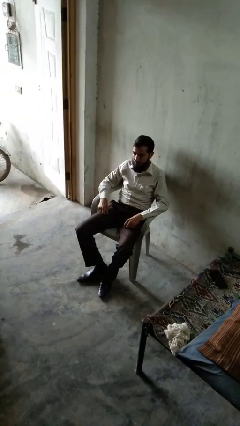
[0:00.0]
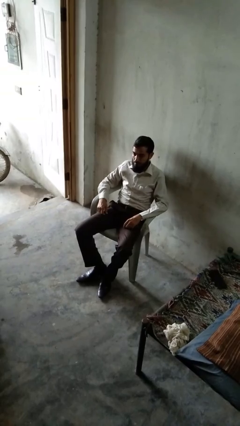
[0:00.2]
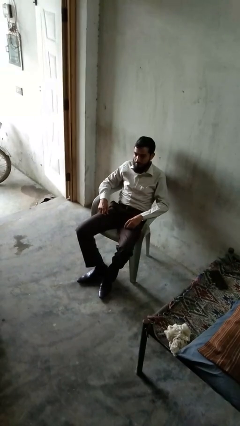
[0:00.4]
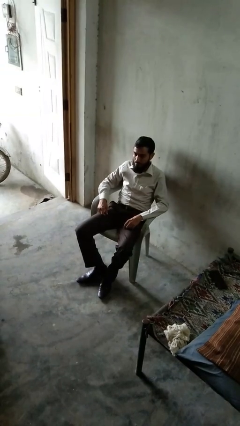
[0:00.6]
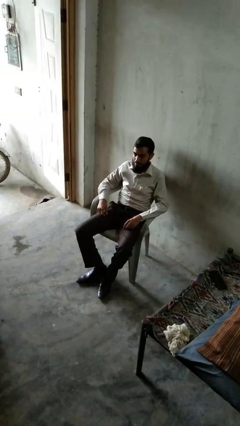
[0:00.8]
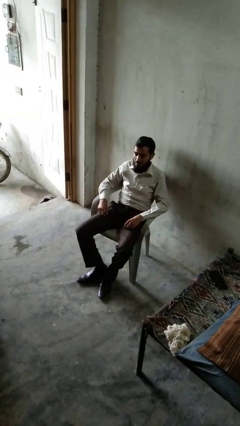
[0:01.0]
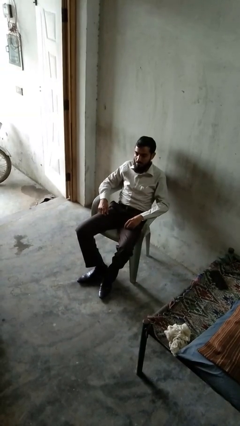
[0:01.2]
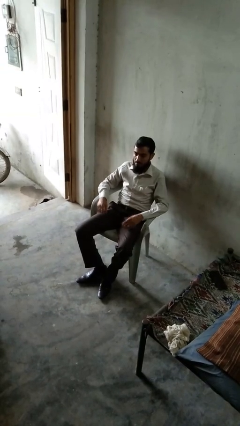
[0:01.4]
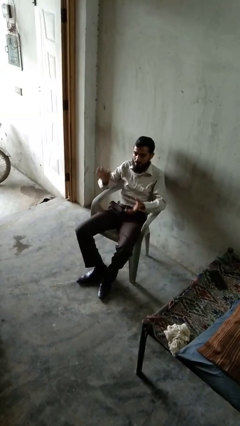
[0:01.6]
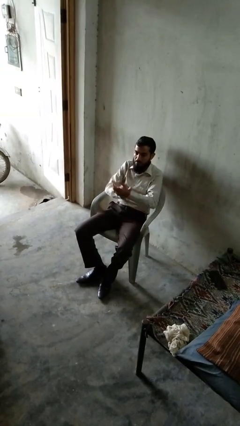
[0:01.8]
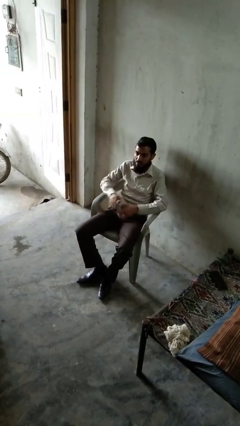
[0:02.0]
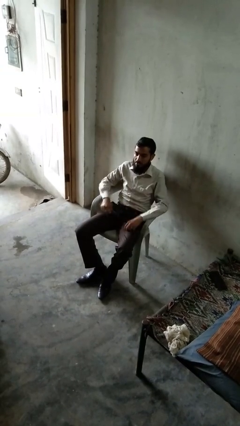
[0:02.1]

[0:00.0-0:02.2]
person claps hands

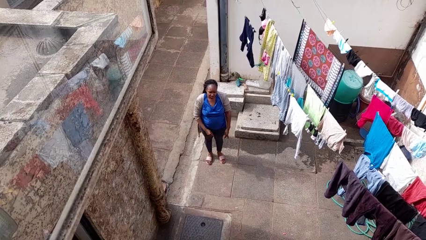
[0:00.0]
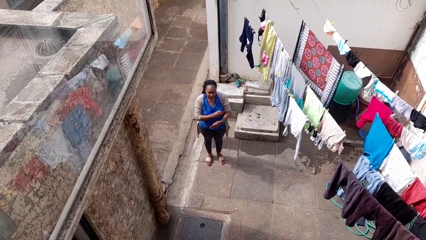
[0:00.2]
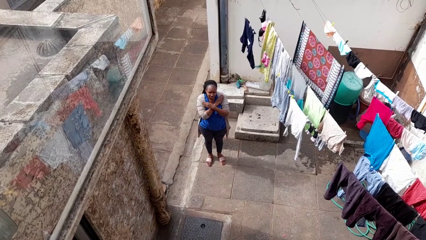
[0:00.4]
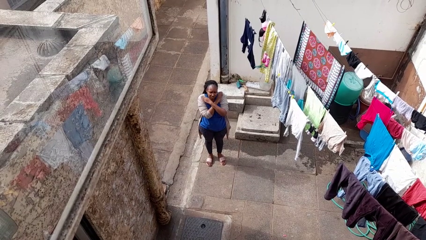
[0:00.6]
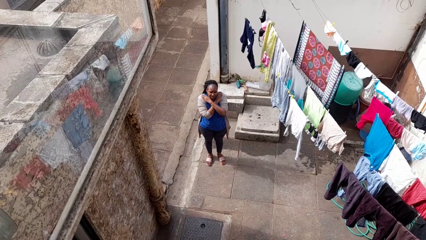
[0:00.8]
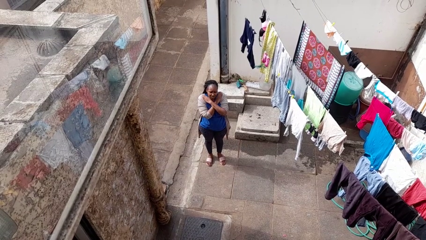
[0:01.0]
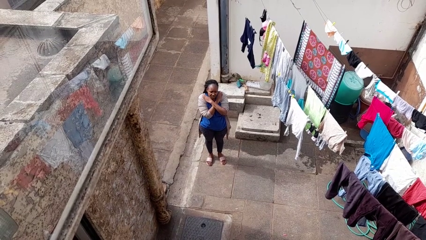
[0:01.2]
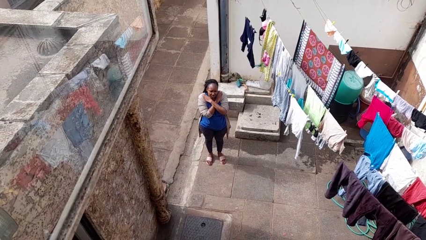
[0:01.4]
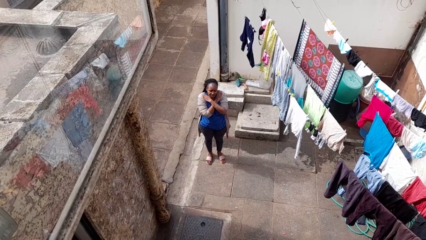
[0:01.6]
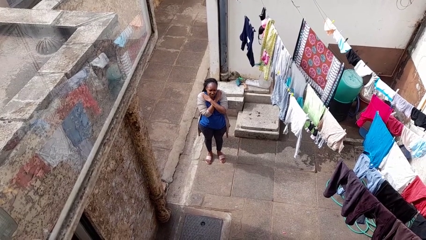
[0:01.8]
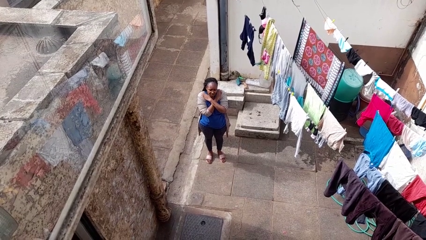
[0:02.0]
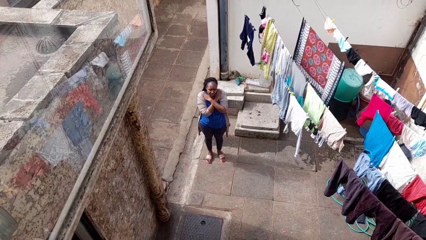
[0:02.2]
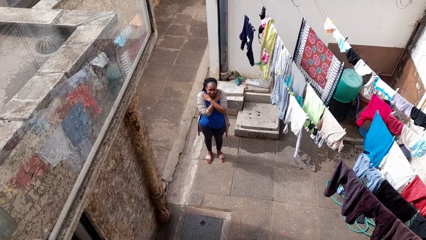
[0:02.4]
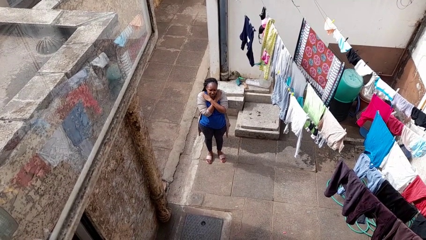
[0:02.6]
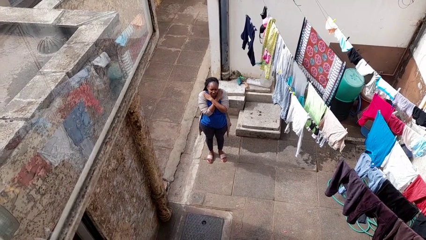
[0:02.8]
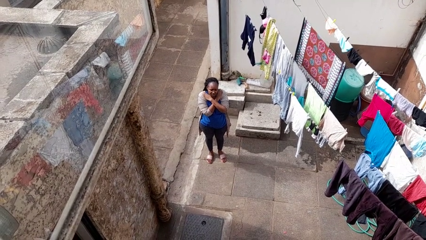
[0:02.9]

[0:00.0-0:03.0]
person gestures arms x

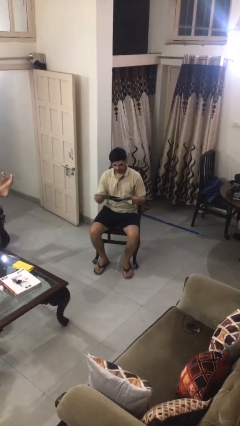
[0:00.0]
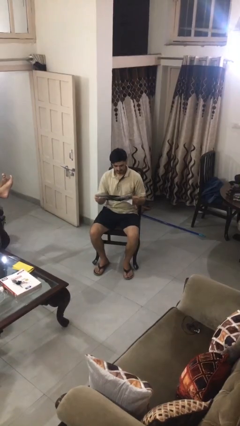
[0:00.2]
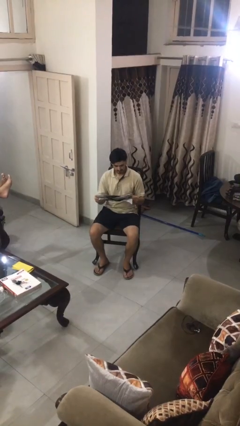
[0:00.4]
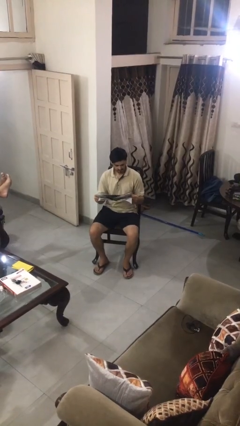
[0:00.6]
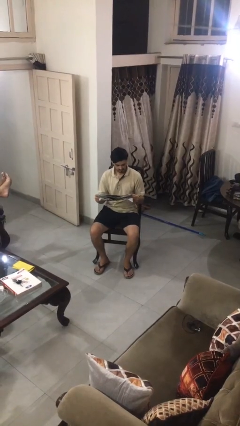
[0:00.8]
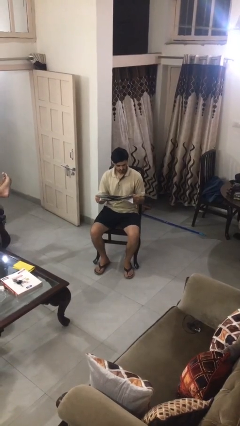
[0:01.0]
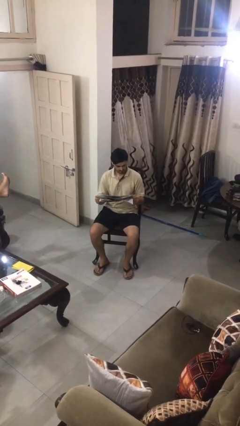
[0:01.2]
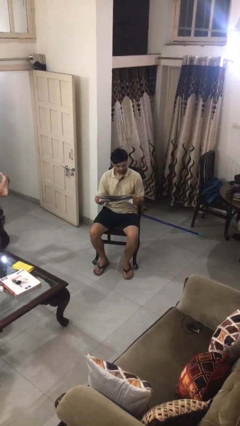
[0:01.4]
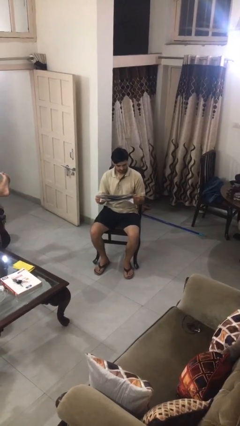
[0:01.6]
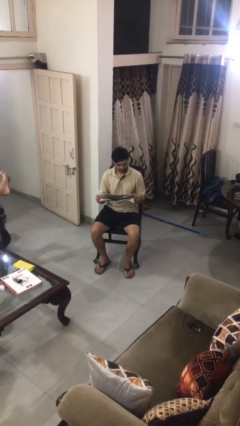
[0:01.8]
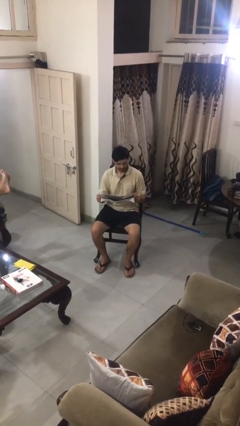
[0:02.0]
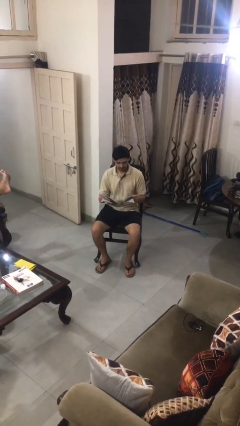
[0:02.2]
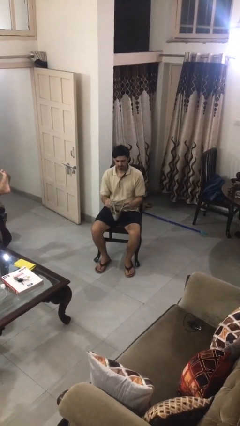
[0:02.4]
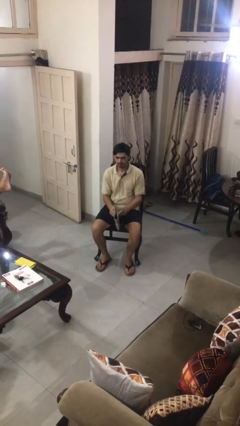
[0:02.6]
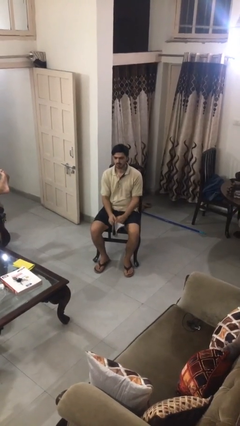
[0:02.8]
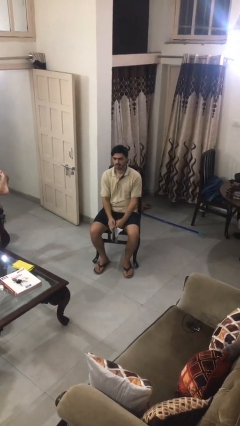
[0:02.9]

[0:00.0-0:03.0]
person reads newspaper

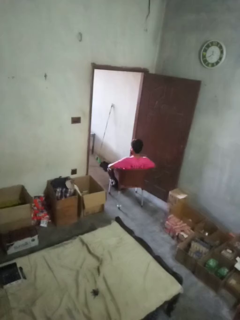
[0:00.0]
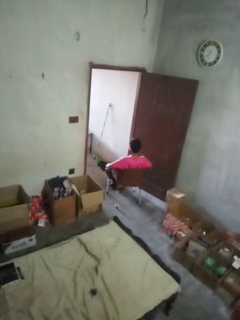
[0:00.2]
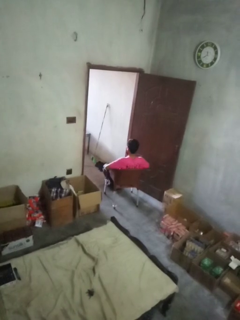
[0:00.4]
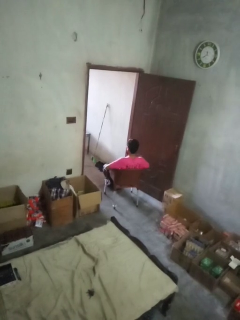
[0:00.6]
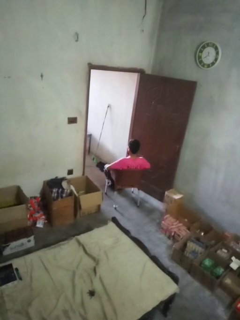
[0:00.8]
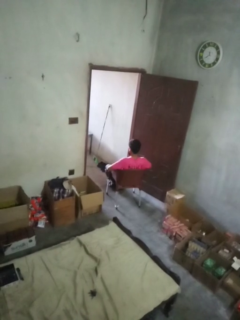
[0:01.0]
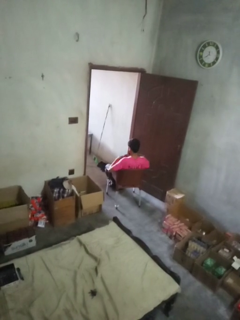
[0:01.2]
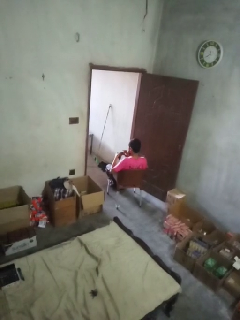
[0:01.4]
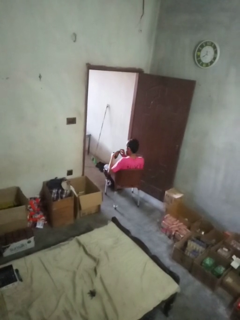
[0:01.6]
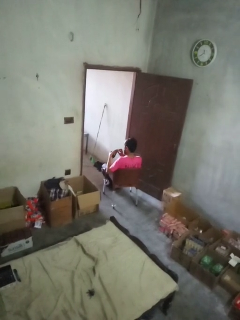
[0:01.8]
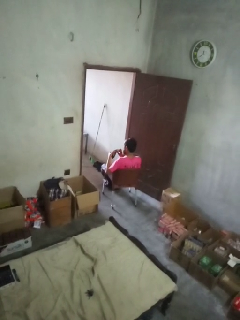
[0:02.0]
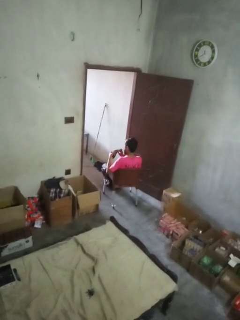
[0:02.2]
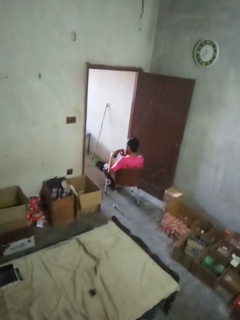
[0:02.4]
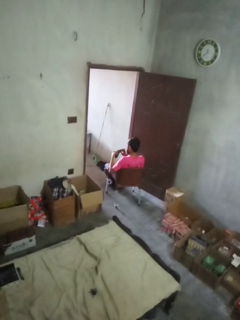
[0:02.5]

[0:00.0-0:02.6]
person searches in purse

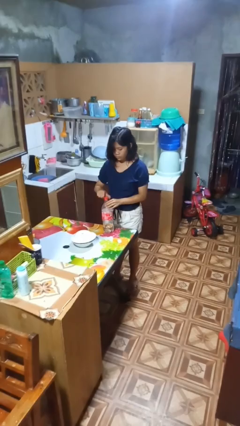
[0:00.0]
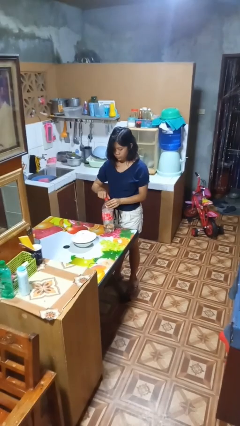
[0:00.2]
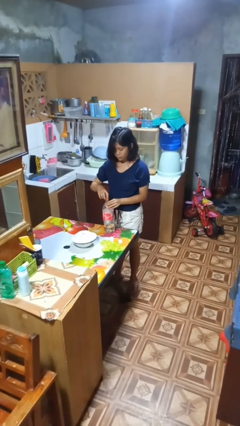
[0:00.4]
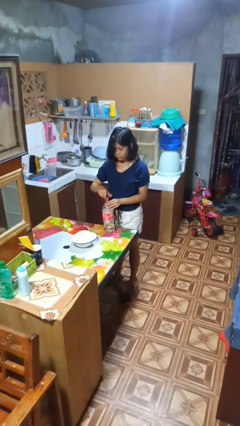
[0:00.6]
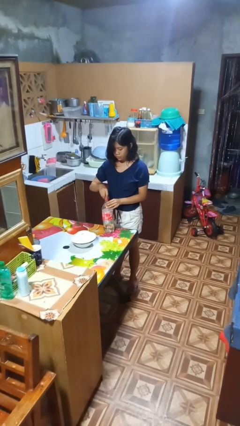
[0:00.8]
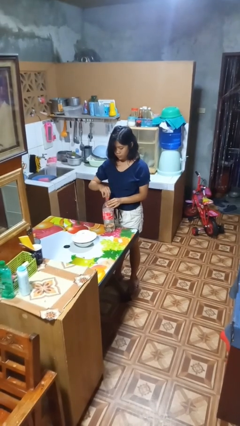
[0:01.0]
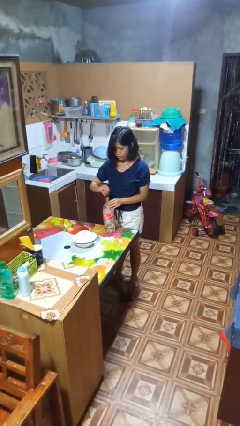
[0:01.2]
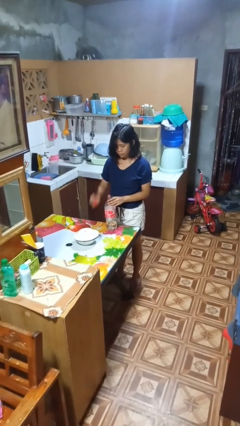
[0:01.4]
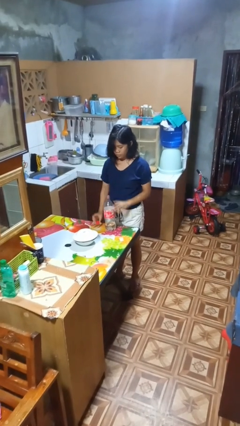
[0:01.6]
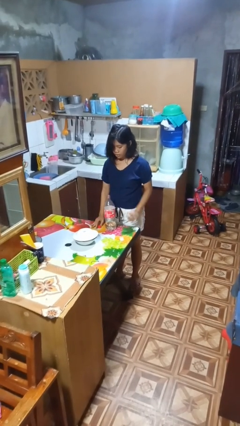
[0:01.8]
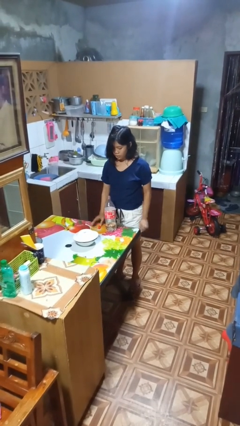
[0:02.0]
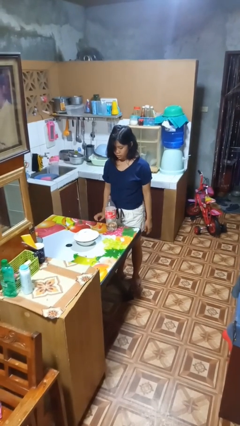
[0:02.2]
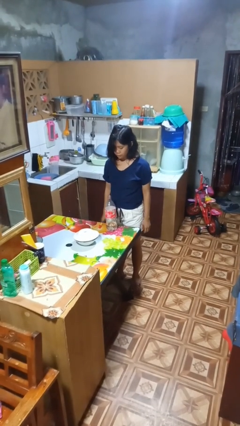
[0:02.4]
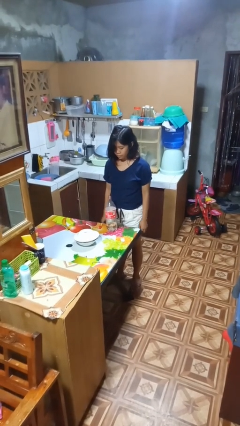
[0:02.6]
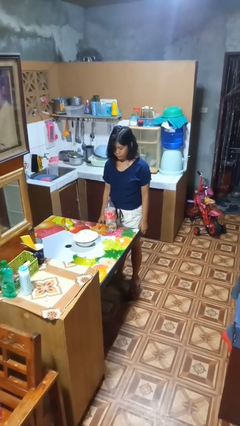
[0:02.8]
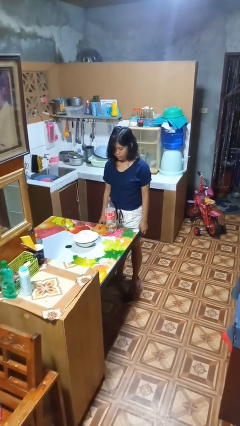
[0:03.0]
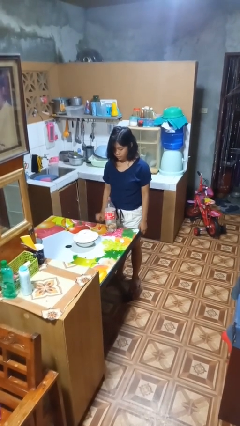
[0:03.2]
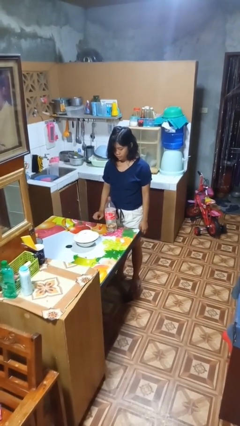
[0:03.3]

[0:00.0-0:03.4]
person unscrews lid from bottle

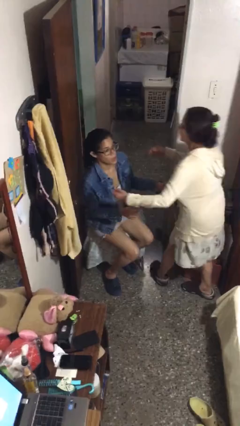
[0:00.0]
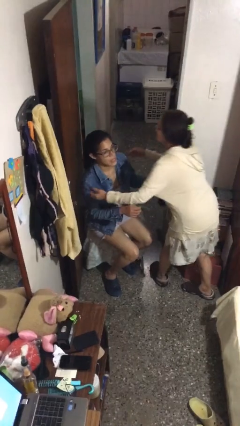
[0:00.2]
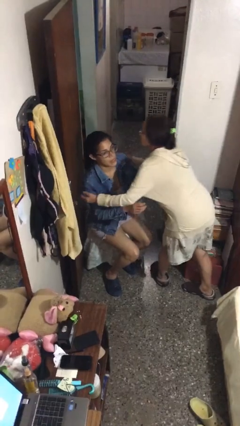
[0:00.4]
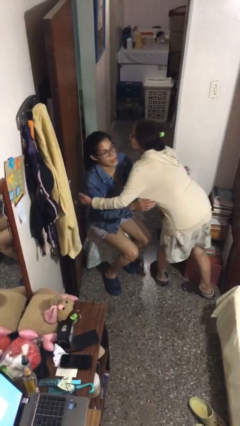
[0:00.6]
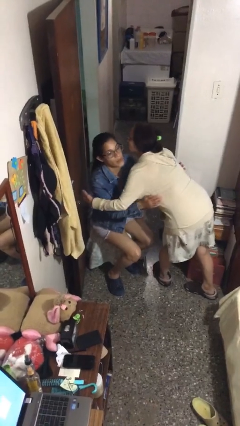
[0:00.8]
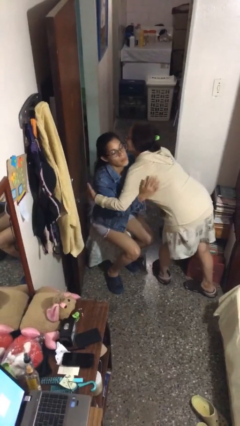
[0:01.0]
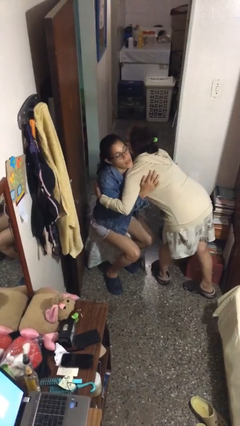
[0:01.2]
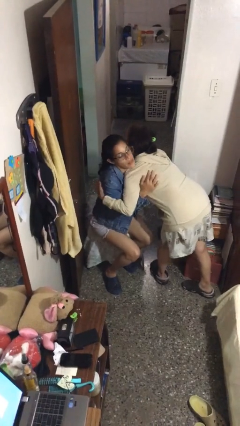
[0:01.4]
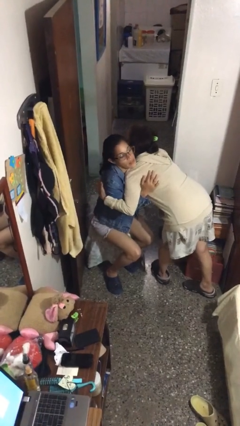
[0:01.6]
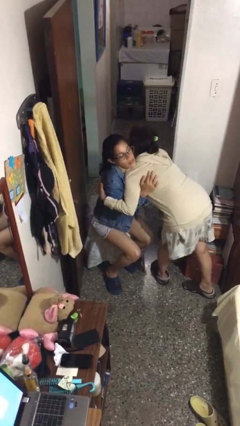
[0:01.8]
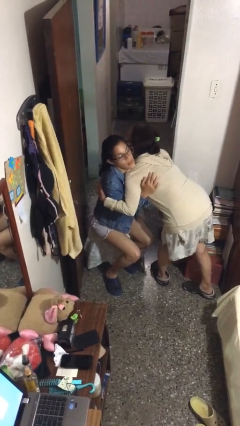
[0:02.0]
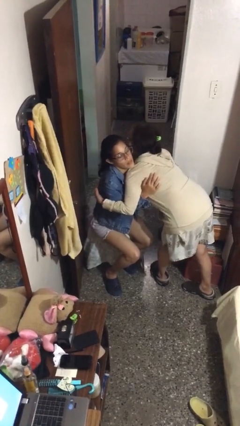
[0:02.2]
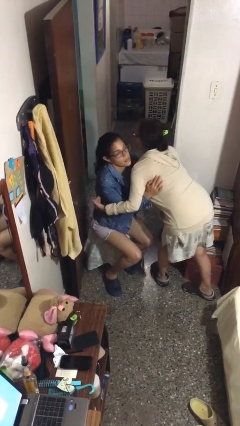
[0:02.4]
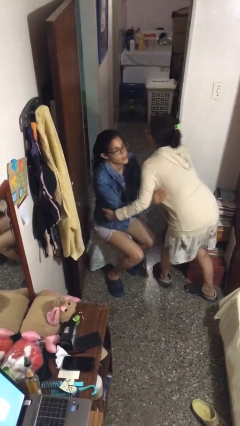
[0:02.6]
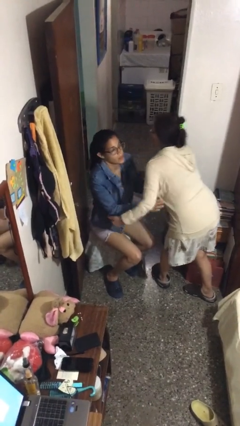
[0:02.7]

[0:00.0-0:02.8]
person embraces person

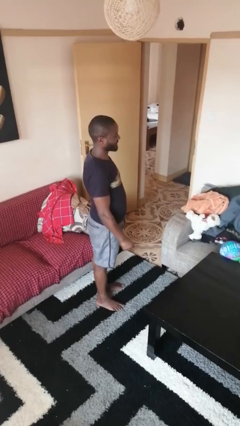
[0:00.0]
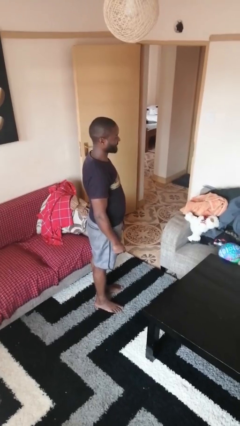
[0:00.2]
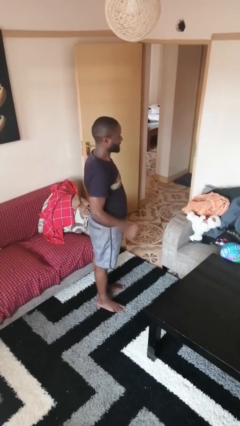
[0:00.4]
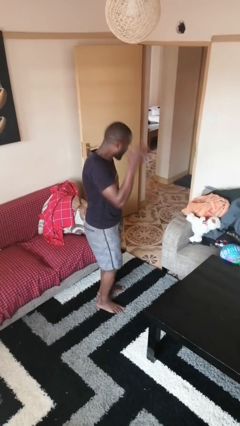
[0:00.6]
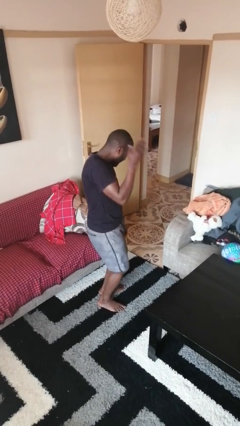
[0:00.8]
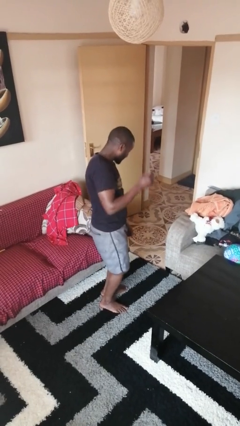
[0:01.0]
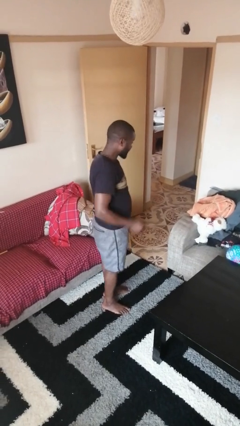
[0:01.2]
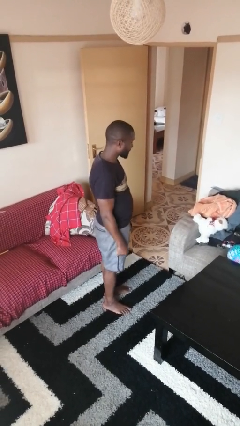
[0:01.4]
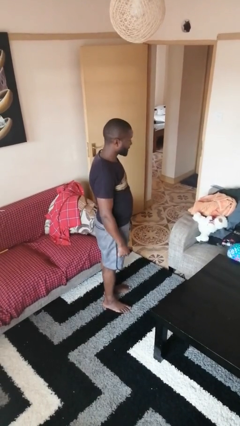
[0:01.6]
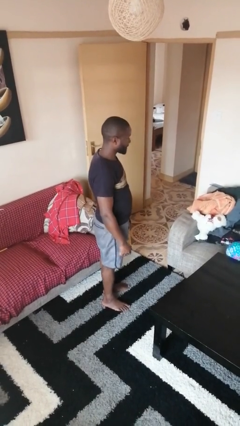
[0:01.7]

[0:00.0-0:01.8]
person swats bug
